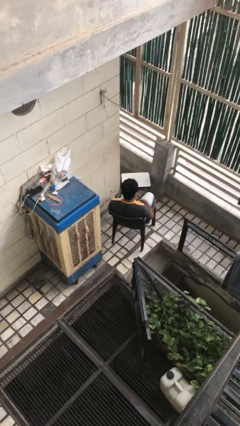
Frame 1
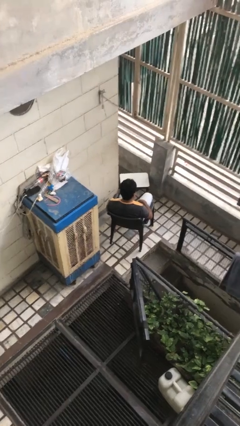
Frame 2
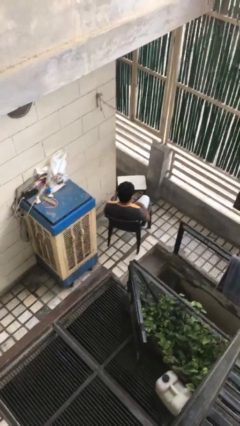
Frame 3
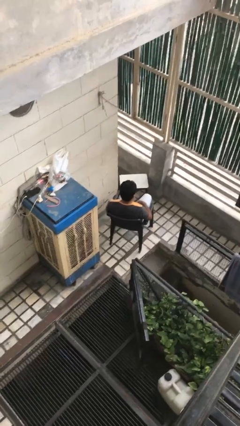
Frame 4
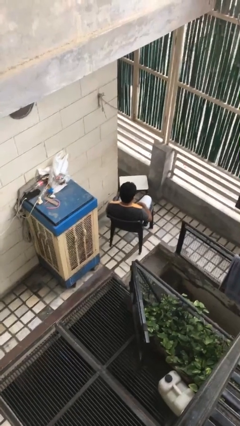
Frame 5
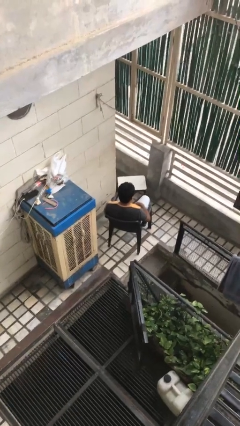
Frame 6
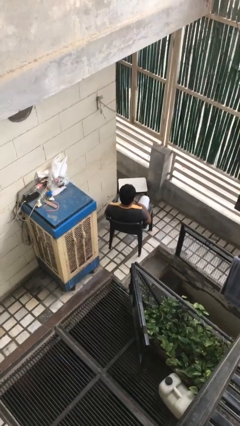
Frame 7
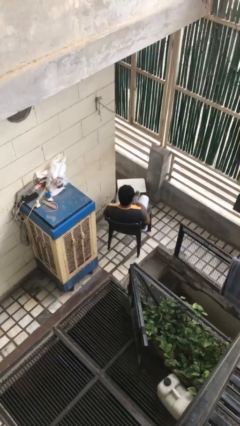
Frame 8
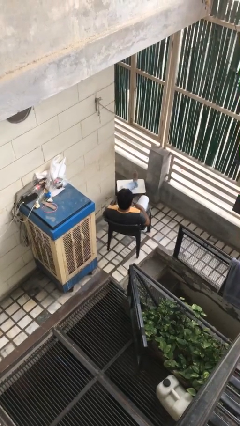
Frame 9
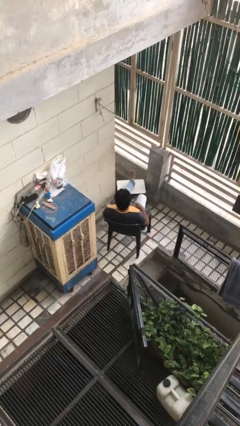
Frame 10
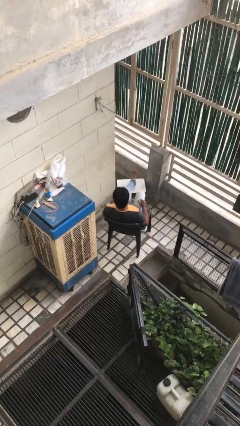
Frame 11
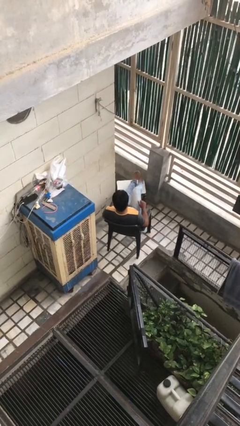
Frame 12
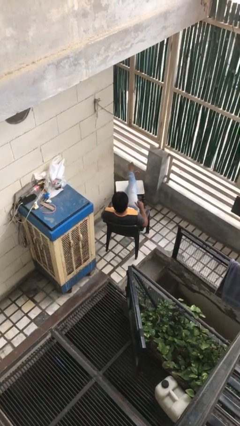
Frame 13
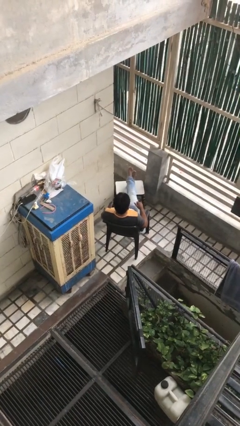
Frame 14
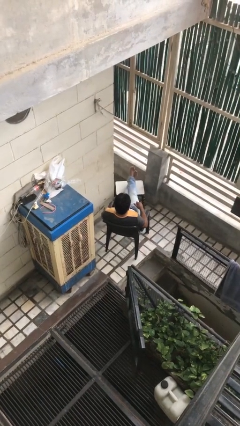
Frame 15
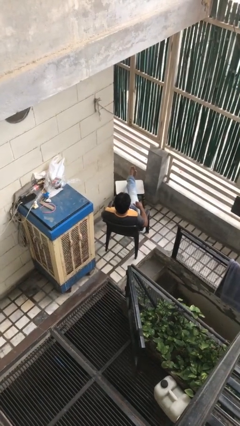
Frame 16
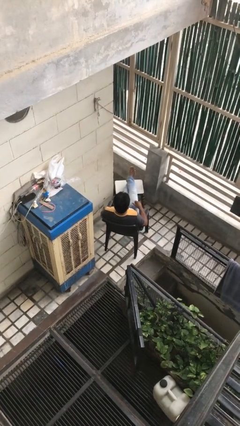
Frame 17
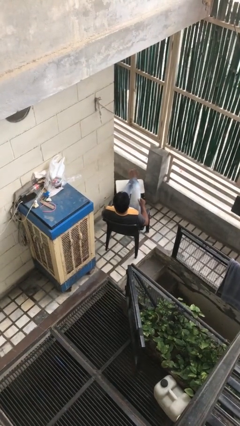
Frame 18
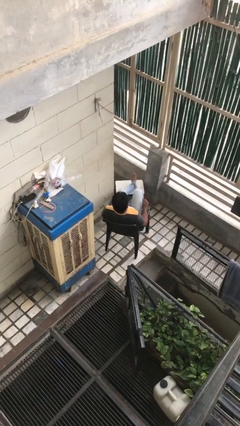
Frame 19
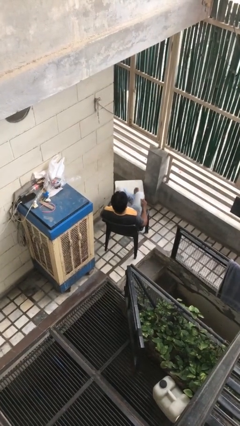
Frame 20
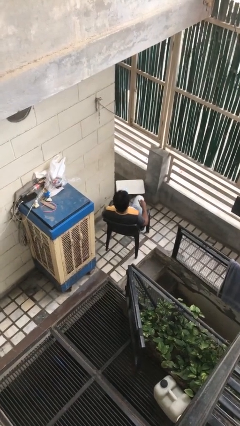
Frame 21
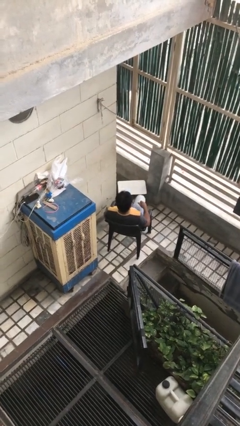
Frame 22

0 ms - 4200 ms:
person puts feet up

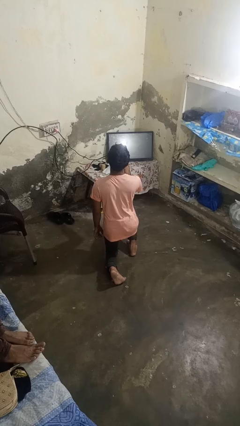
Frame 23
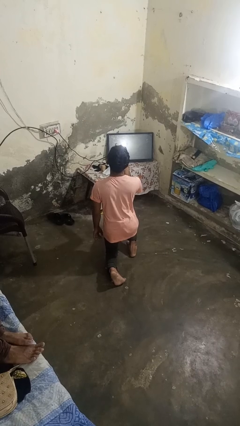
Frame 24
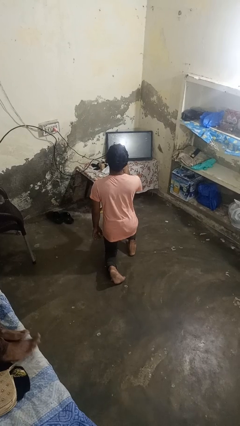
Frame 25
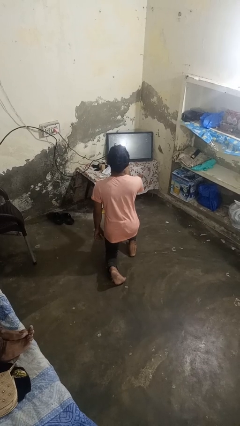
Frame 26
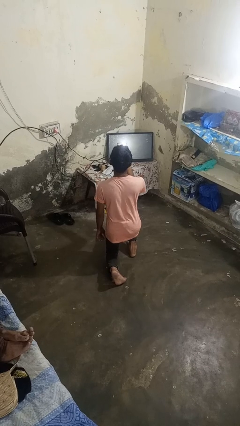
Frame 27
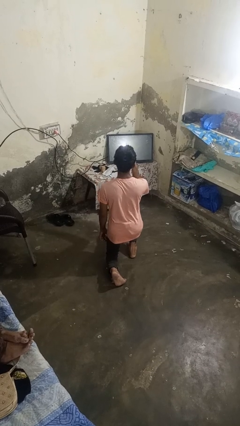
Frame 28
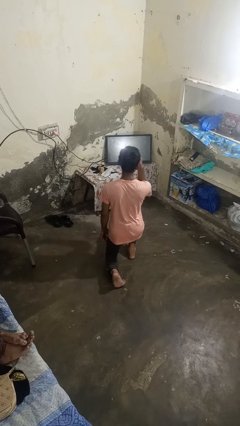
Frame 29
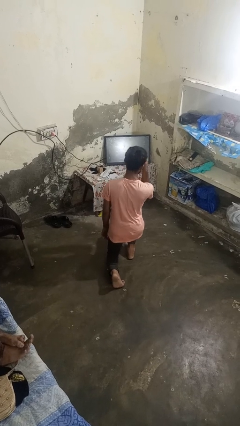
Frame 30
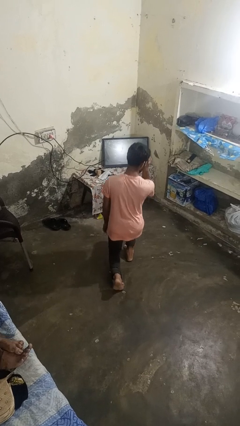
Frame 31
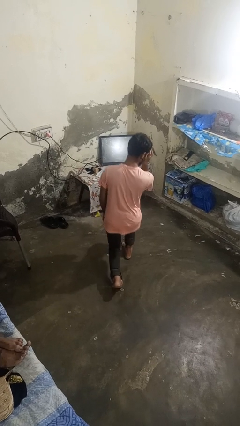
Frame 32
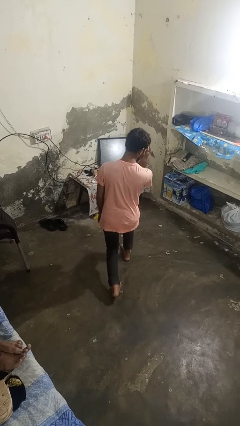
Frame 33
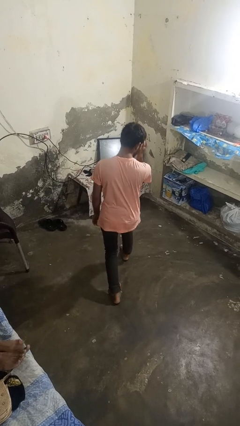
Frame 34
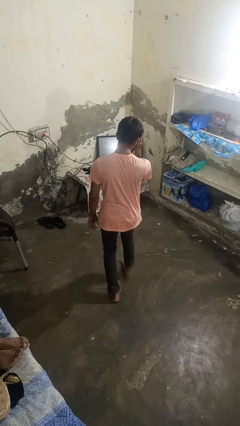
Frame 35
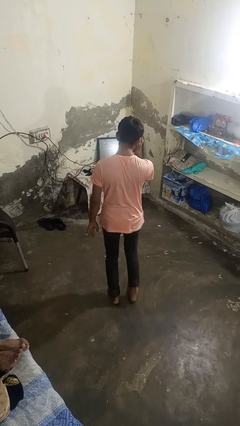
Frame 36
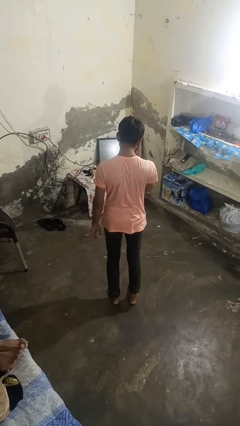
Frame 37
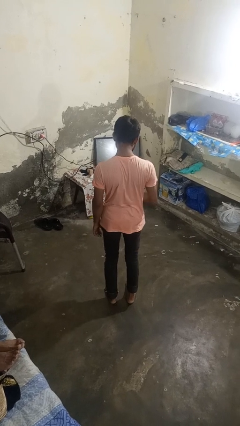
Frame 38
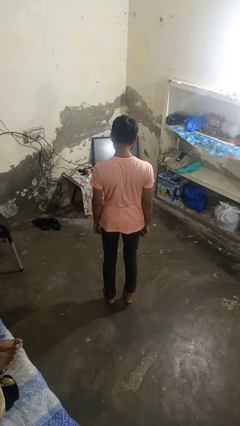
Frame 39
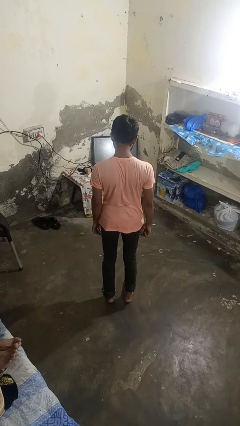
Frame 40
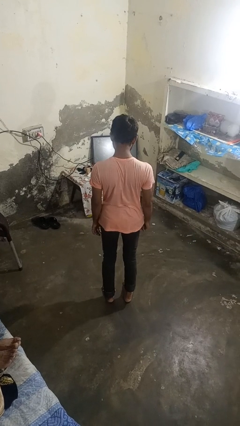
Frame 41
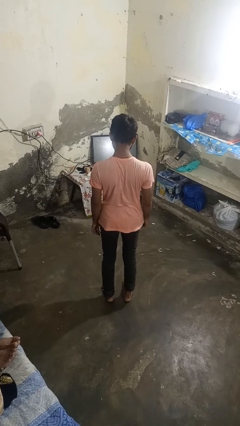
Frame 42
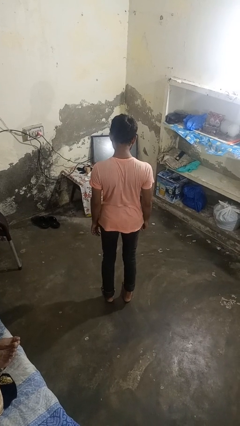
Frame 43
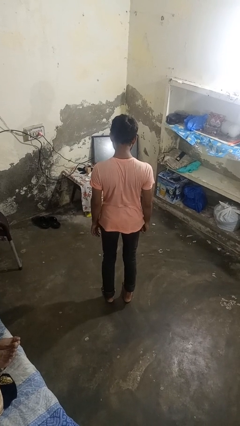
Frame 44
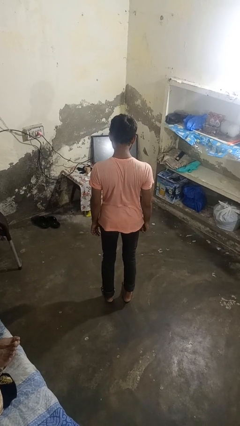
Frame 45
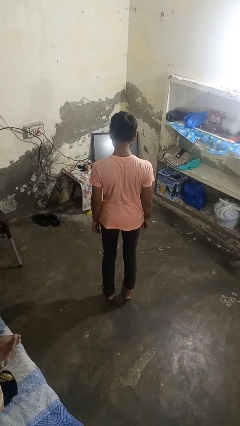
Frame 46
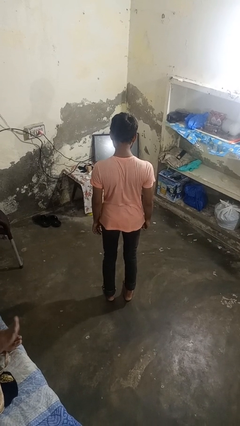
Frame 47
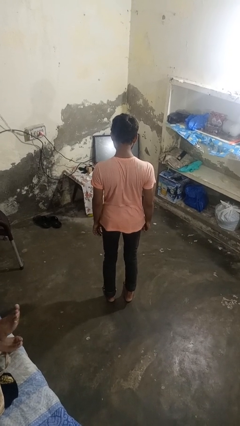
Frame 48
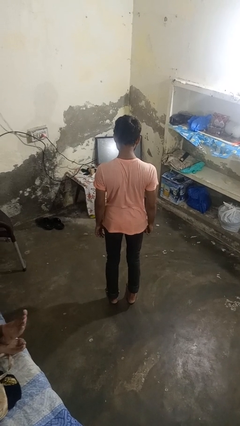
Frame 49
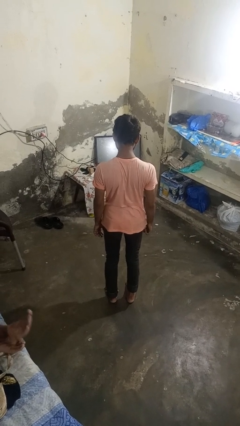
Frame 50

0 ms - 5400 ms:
person stands up from floor

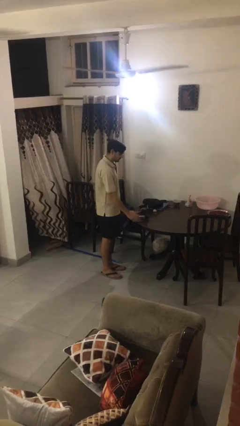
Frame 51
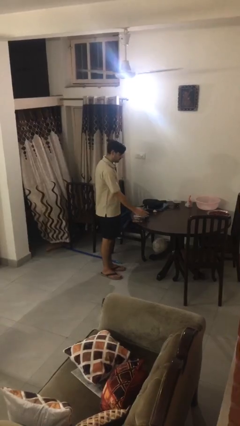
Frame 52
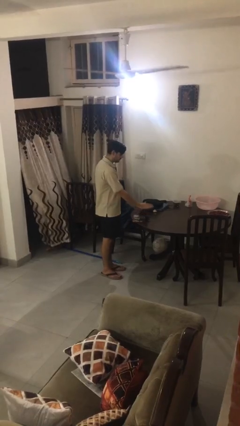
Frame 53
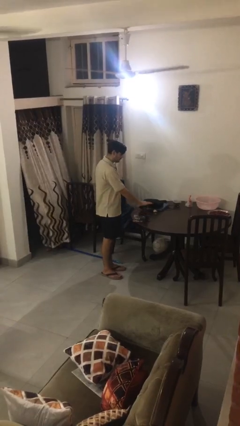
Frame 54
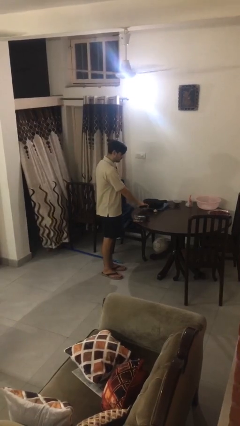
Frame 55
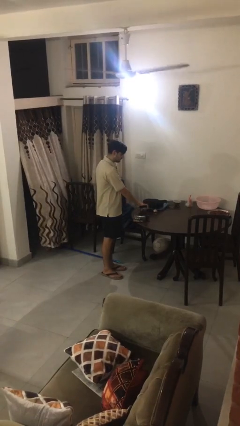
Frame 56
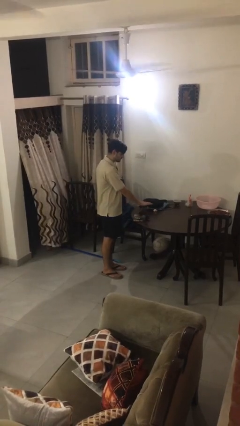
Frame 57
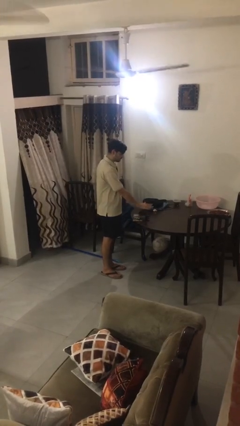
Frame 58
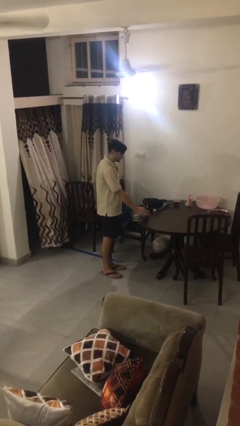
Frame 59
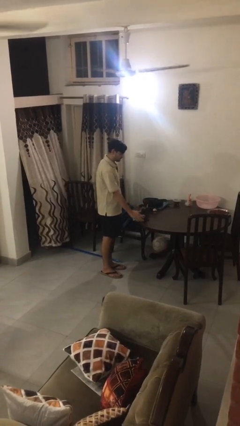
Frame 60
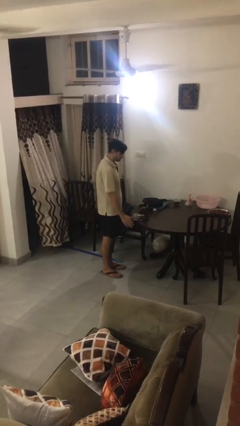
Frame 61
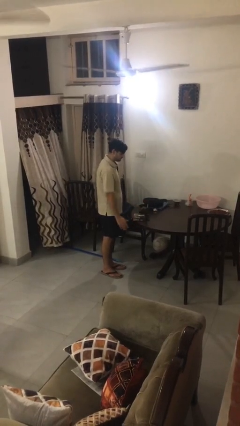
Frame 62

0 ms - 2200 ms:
person waves hand over object

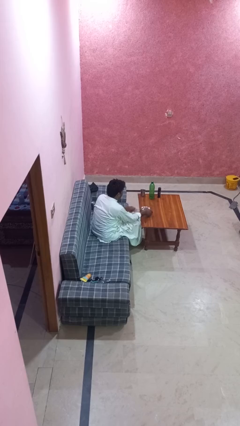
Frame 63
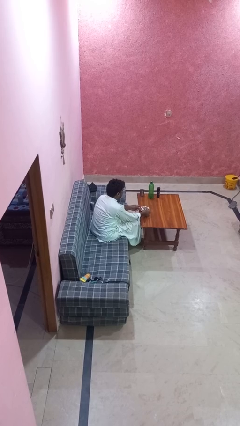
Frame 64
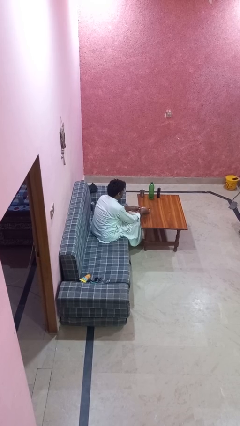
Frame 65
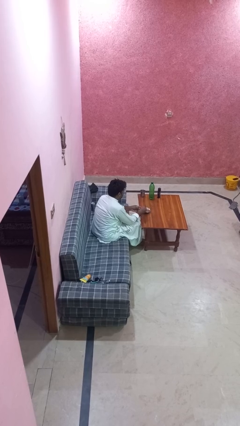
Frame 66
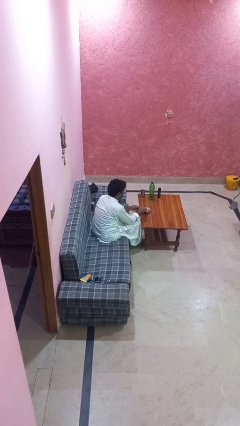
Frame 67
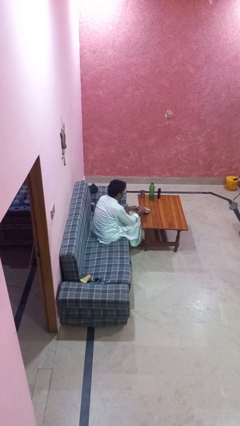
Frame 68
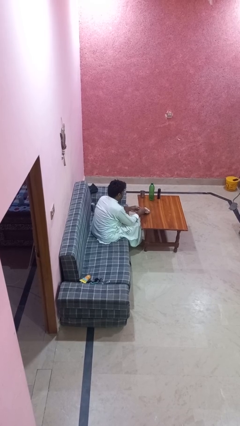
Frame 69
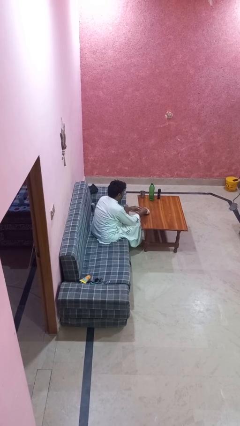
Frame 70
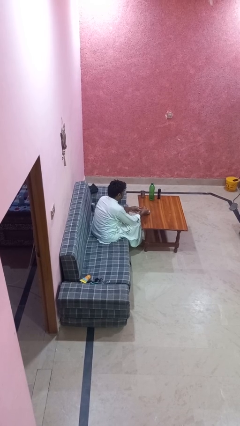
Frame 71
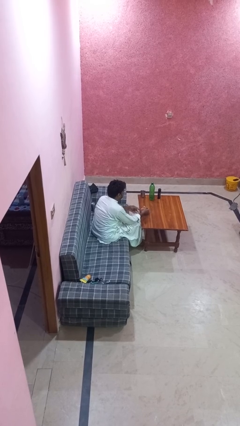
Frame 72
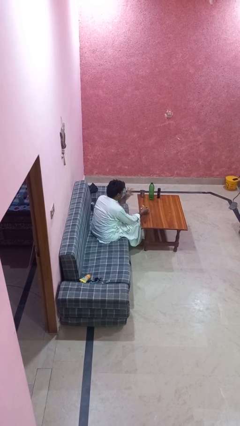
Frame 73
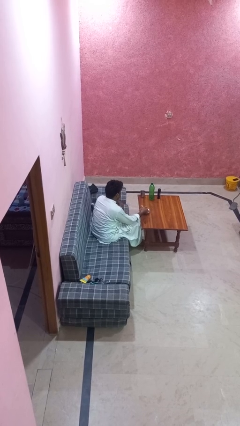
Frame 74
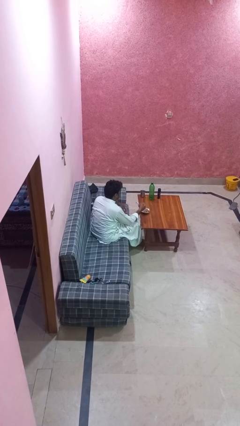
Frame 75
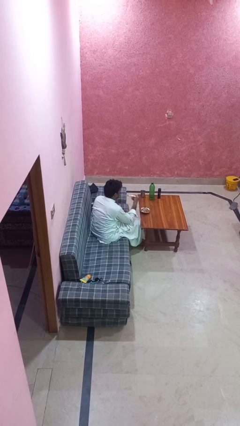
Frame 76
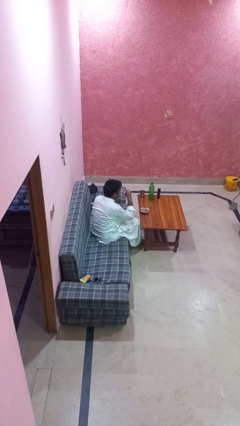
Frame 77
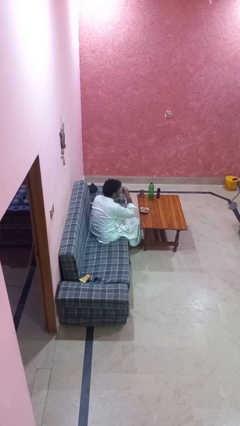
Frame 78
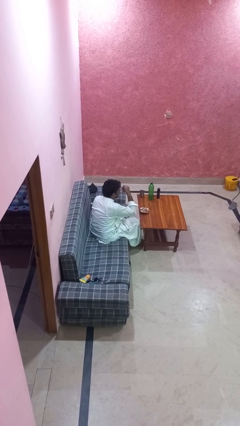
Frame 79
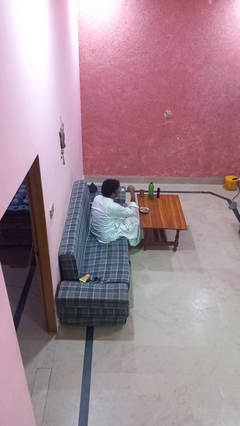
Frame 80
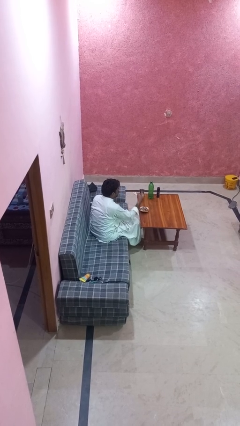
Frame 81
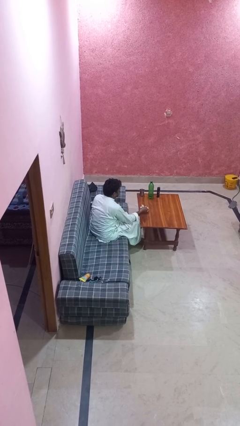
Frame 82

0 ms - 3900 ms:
person eats with utensil

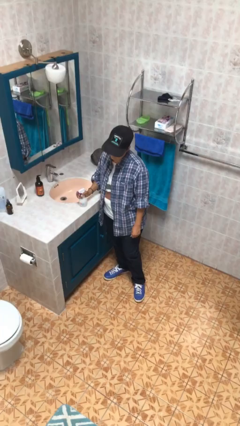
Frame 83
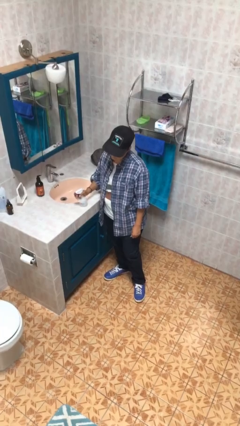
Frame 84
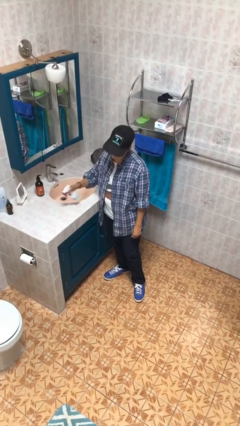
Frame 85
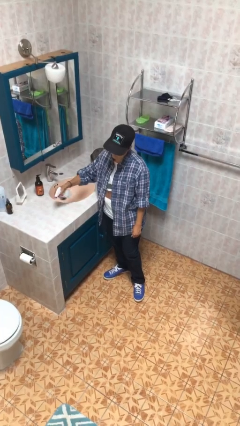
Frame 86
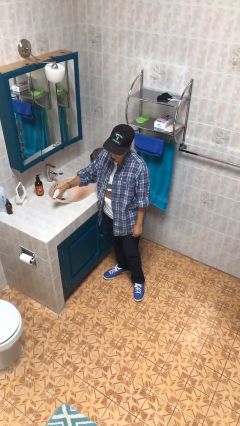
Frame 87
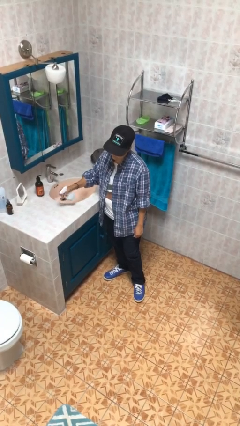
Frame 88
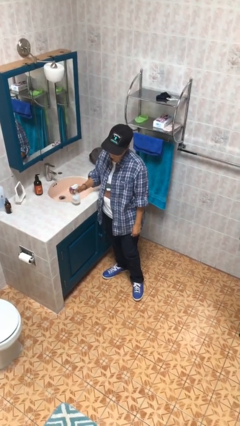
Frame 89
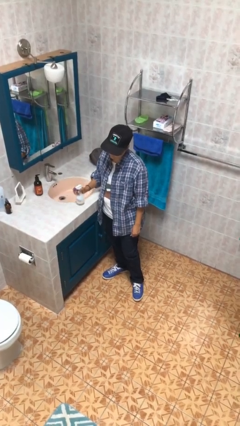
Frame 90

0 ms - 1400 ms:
person sprays from bottle

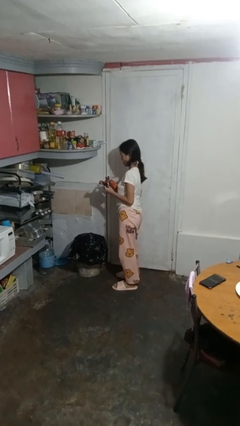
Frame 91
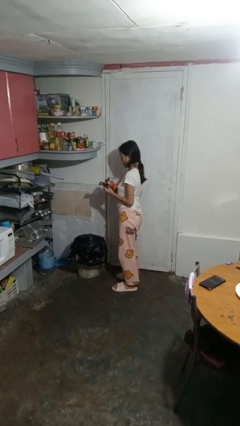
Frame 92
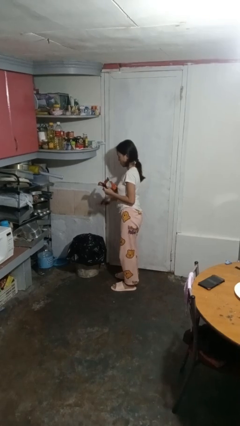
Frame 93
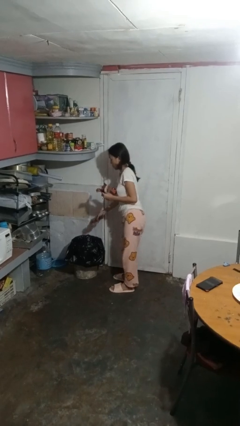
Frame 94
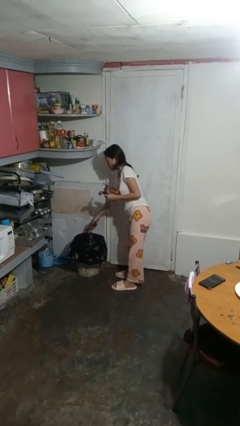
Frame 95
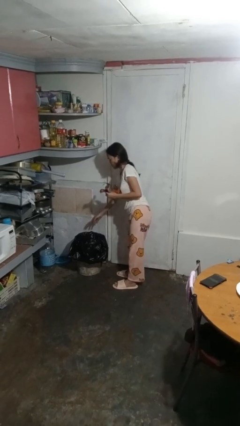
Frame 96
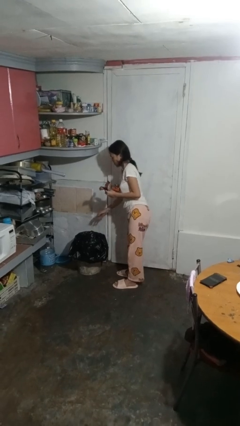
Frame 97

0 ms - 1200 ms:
person discards trash
